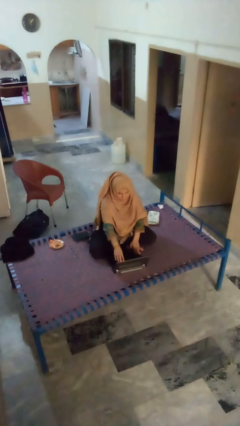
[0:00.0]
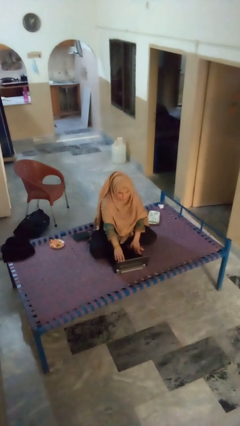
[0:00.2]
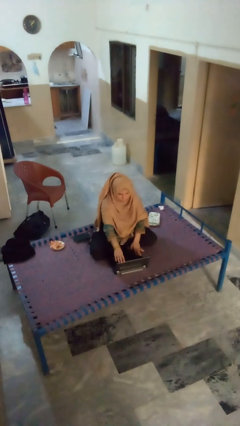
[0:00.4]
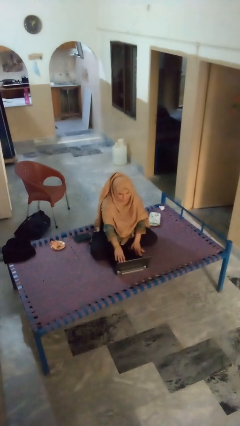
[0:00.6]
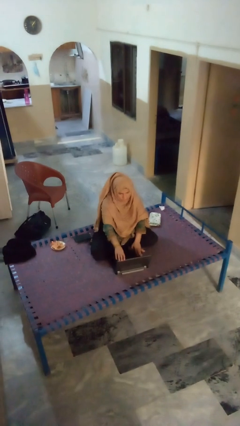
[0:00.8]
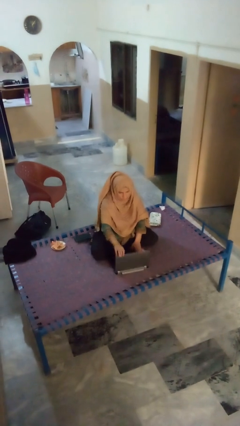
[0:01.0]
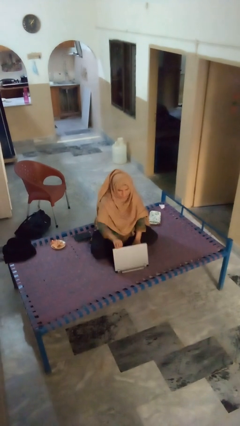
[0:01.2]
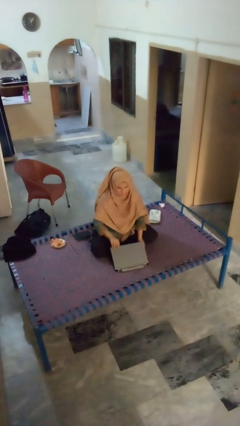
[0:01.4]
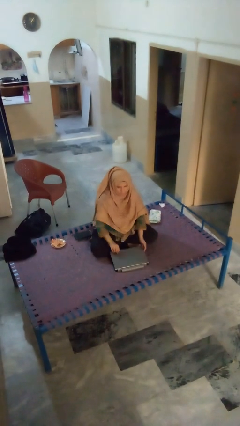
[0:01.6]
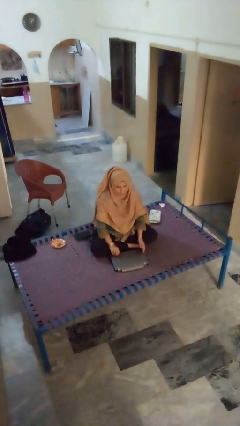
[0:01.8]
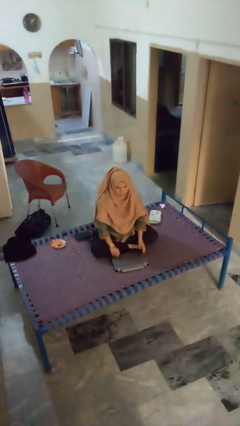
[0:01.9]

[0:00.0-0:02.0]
person closes laptop

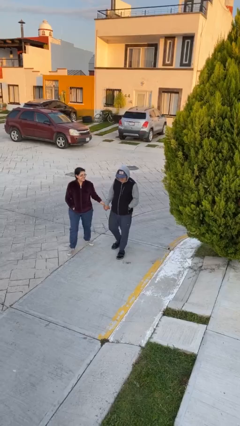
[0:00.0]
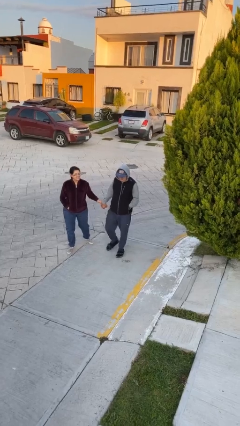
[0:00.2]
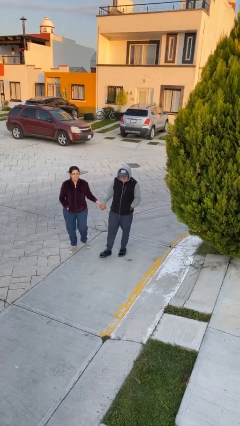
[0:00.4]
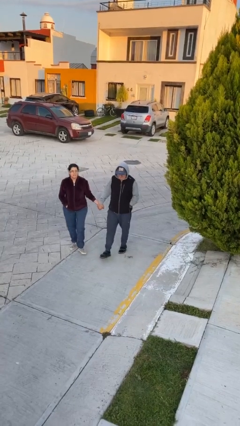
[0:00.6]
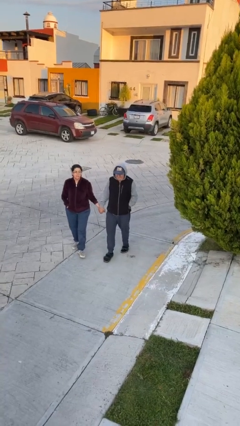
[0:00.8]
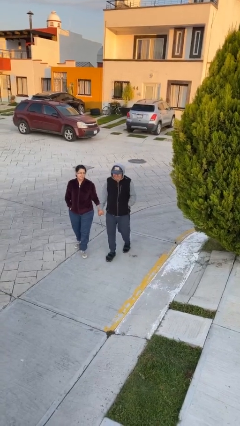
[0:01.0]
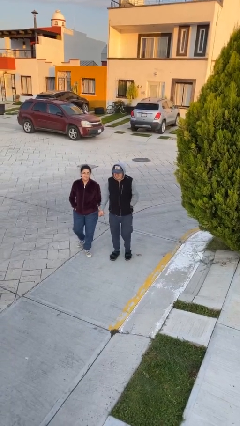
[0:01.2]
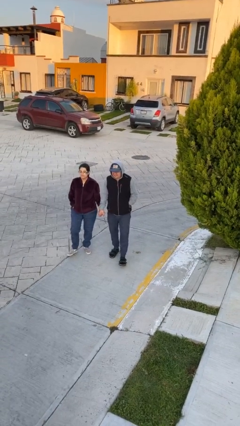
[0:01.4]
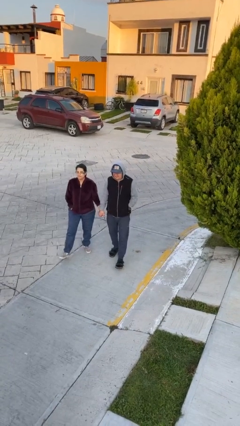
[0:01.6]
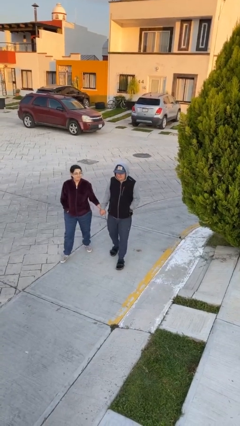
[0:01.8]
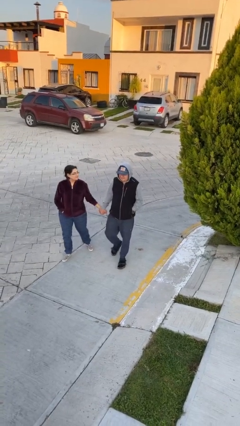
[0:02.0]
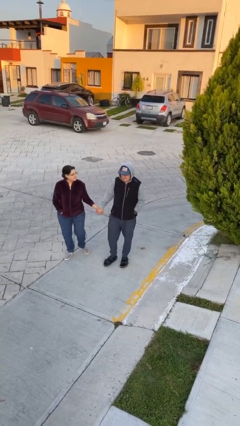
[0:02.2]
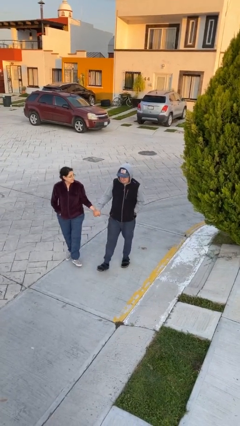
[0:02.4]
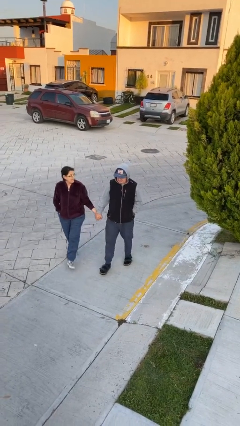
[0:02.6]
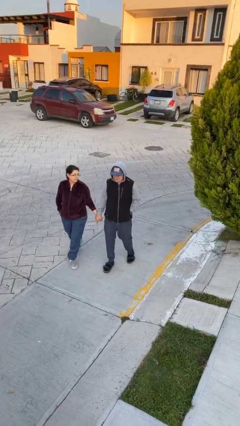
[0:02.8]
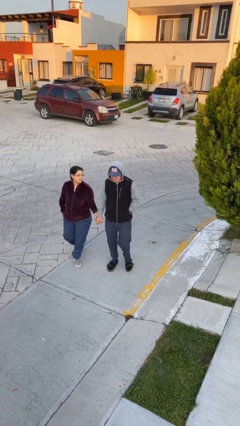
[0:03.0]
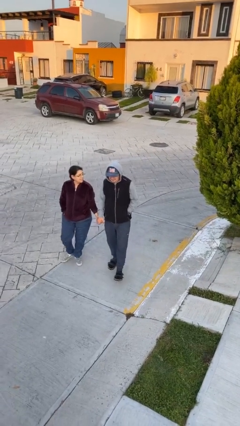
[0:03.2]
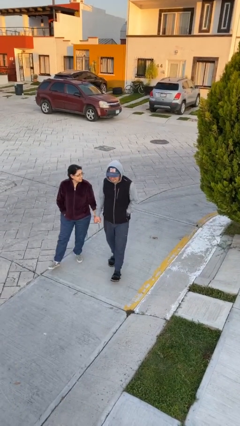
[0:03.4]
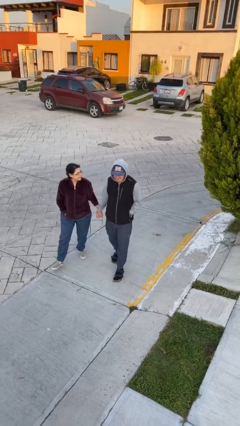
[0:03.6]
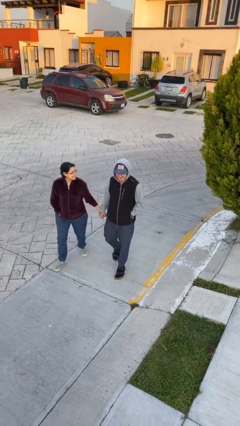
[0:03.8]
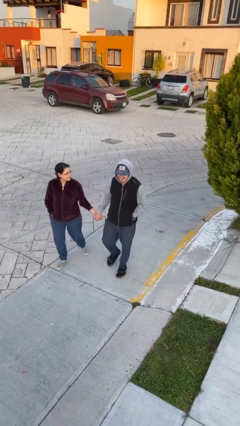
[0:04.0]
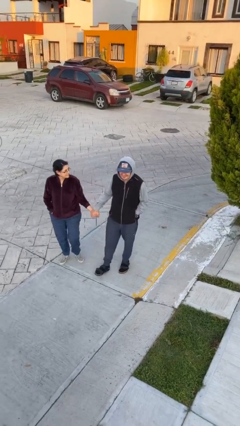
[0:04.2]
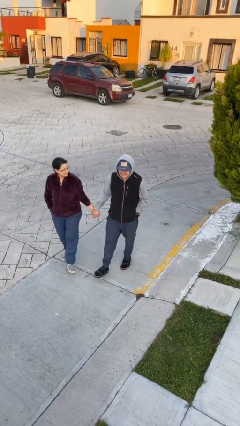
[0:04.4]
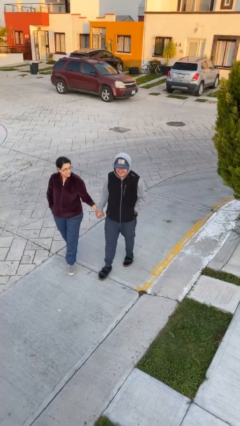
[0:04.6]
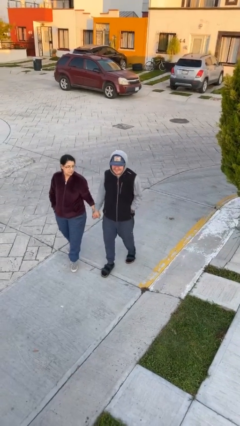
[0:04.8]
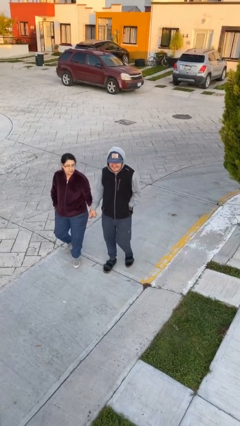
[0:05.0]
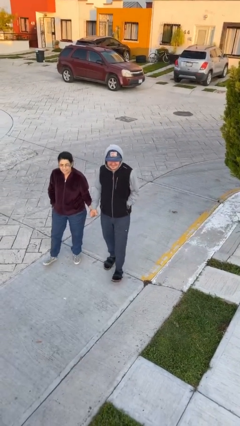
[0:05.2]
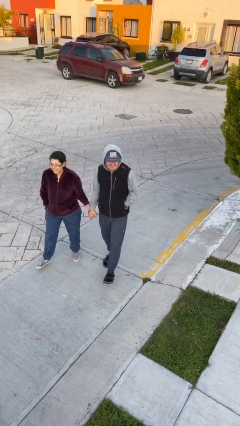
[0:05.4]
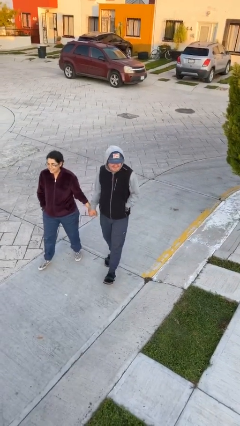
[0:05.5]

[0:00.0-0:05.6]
person holds hand

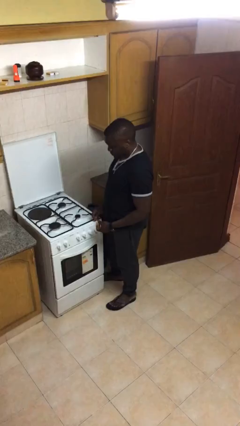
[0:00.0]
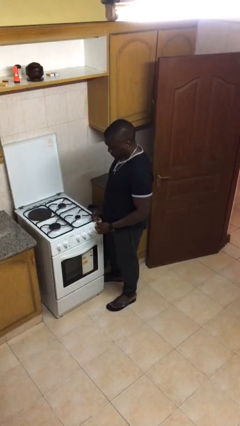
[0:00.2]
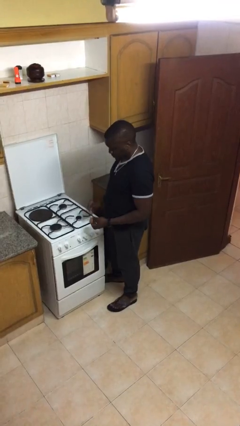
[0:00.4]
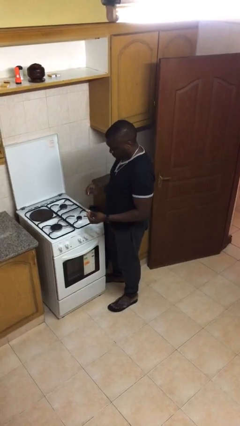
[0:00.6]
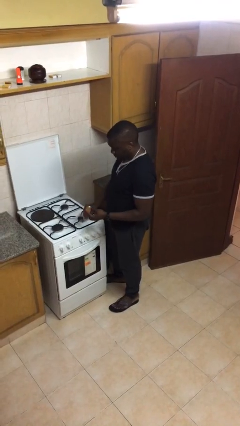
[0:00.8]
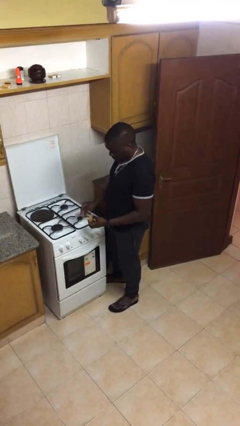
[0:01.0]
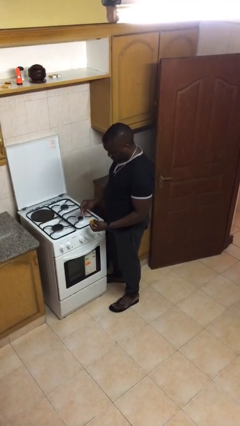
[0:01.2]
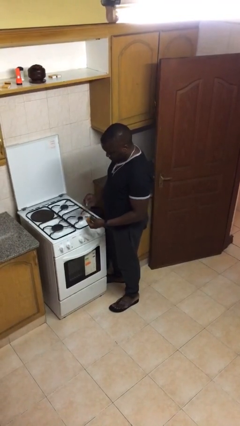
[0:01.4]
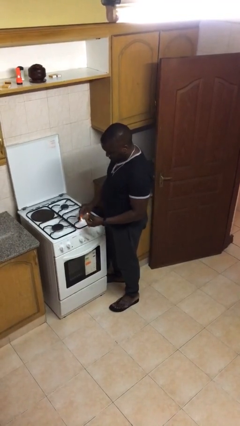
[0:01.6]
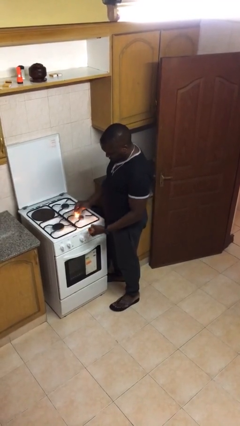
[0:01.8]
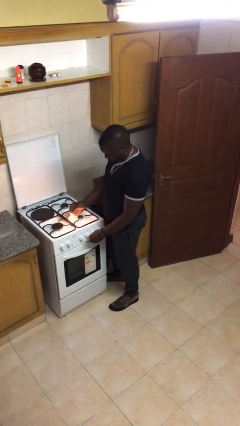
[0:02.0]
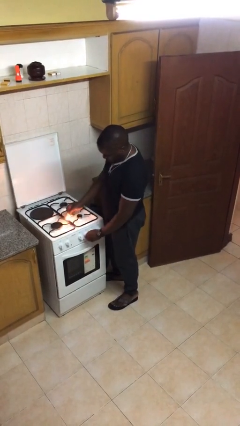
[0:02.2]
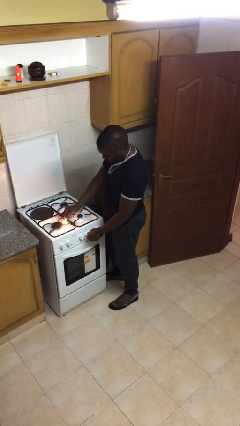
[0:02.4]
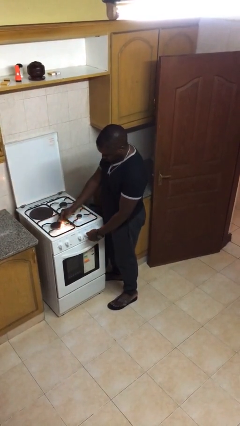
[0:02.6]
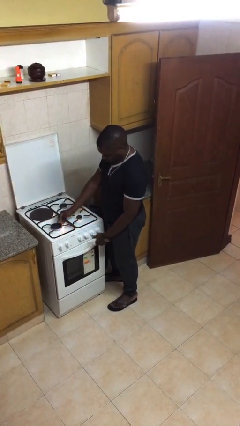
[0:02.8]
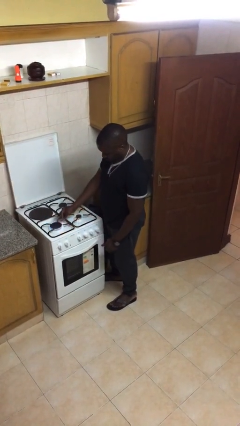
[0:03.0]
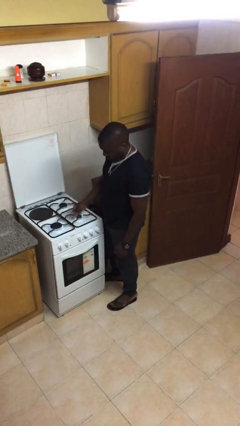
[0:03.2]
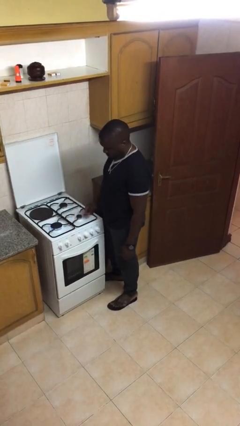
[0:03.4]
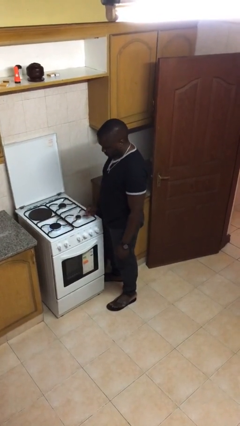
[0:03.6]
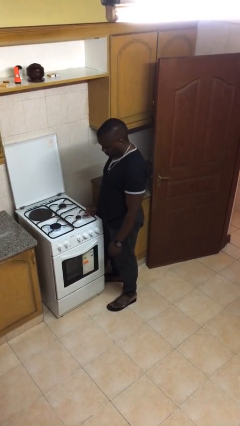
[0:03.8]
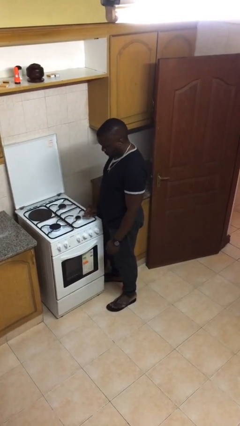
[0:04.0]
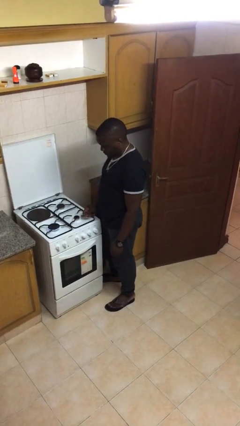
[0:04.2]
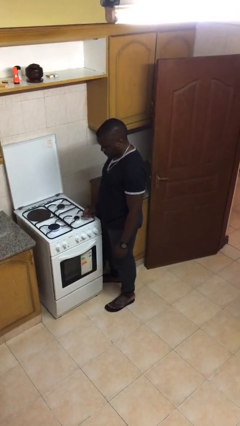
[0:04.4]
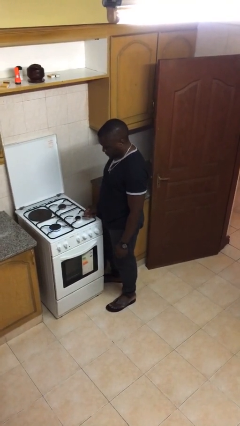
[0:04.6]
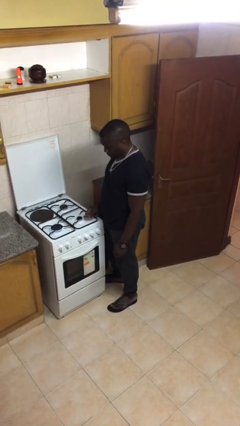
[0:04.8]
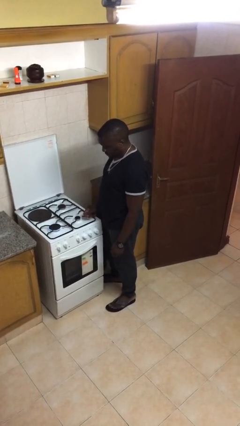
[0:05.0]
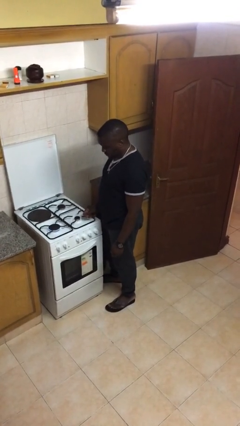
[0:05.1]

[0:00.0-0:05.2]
person turns on stovetop

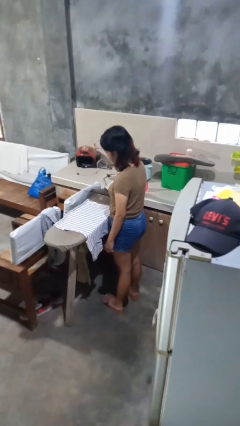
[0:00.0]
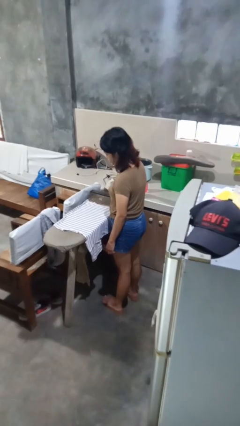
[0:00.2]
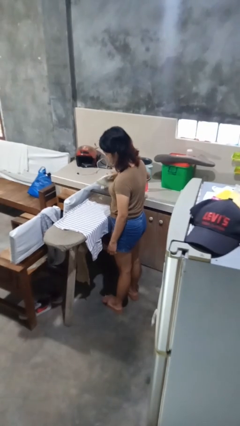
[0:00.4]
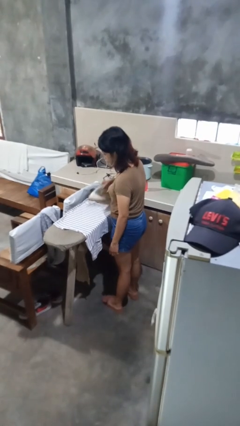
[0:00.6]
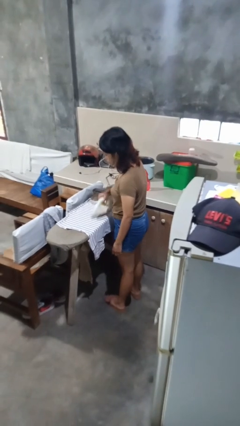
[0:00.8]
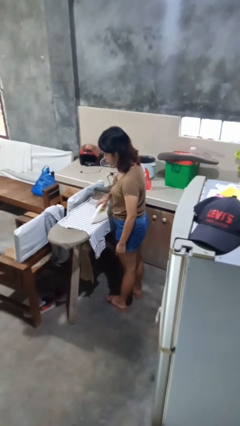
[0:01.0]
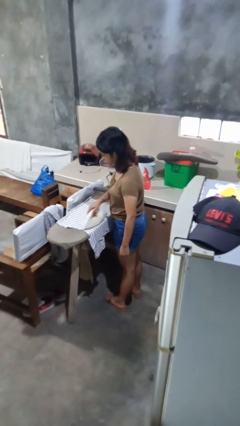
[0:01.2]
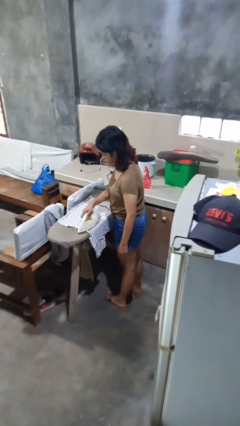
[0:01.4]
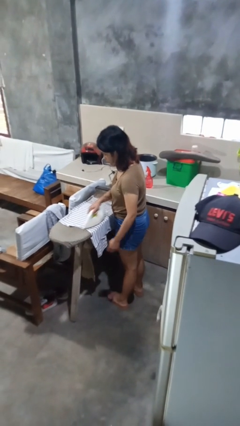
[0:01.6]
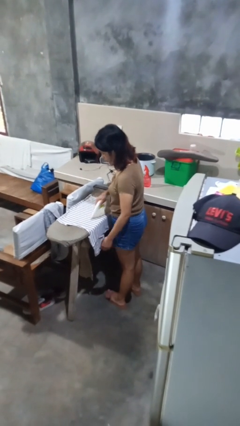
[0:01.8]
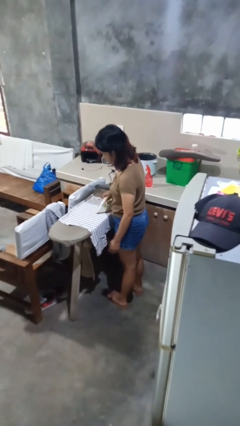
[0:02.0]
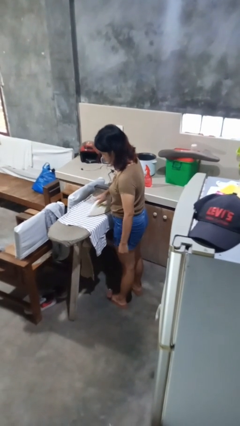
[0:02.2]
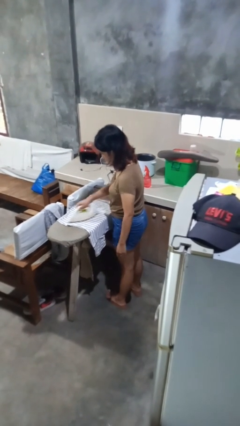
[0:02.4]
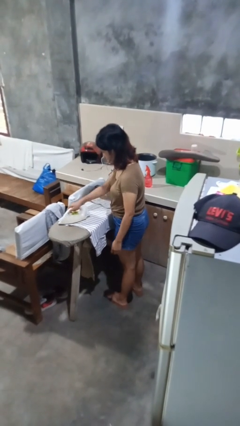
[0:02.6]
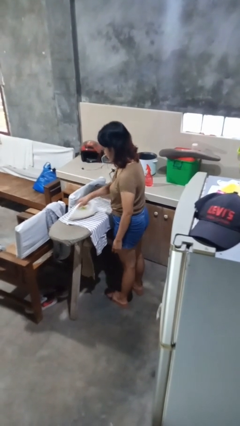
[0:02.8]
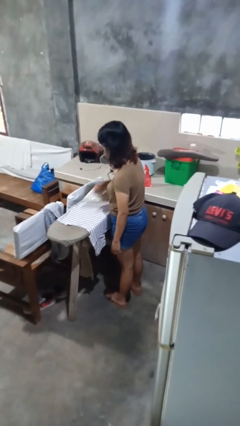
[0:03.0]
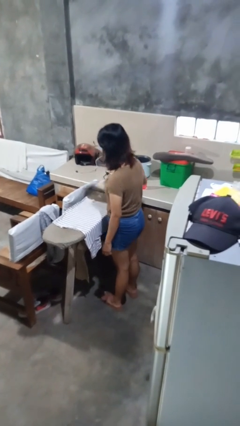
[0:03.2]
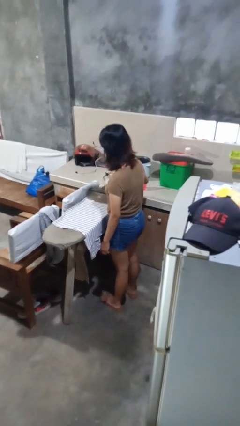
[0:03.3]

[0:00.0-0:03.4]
person irons clothes

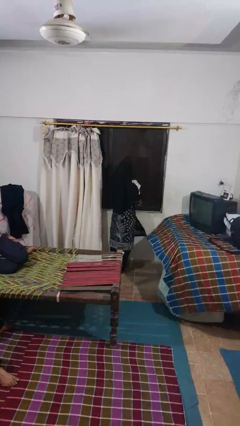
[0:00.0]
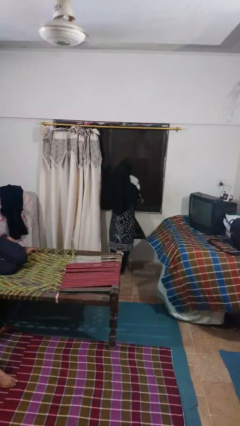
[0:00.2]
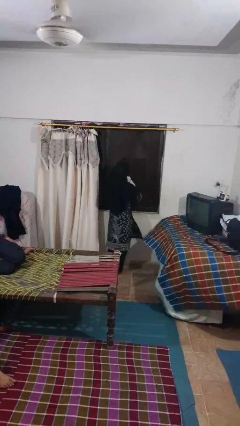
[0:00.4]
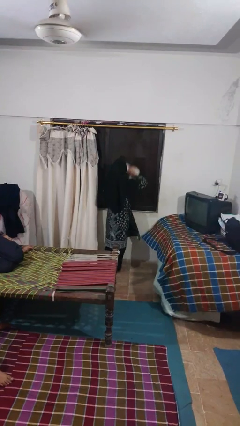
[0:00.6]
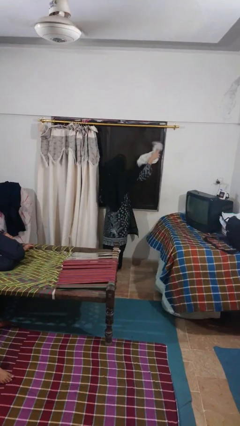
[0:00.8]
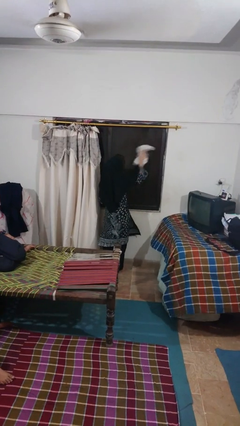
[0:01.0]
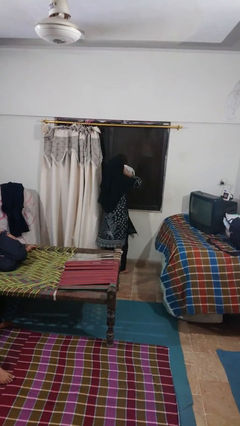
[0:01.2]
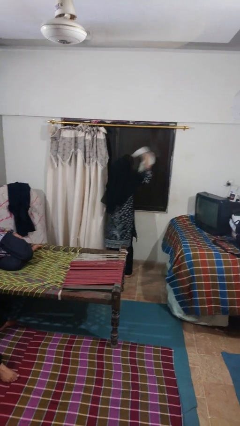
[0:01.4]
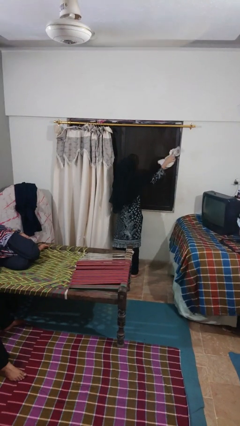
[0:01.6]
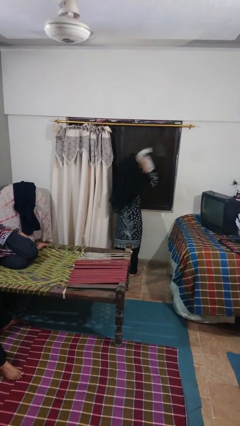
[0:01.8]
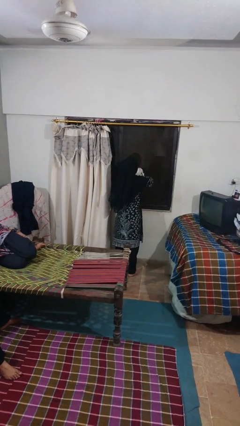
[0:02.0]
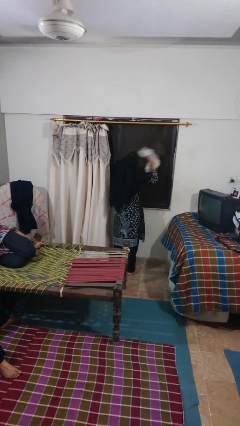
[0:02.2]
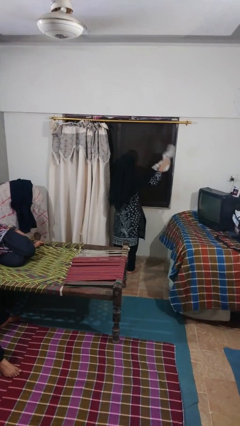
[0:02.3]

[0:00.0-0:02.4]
person washes window
